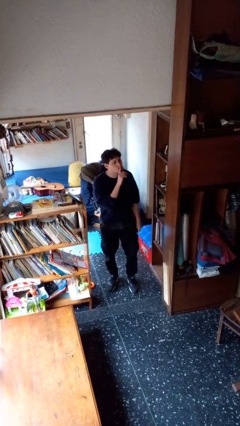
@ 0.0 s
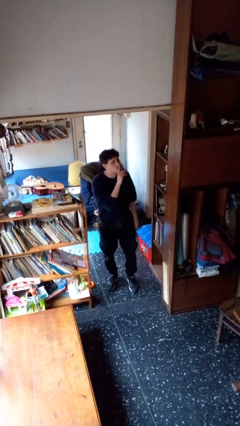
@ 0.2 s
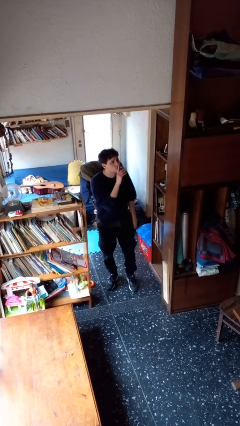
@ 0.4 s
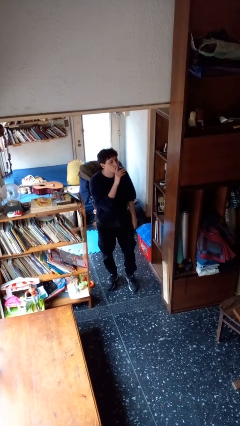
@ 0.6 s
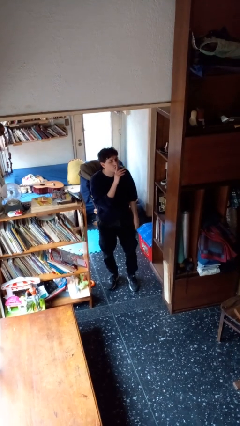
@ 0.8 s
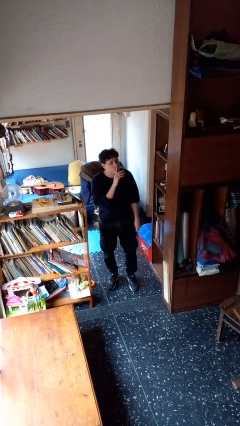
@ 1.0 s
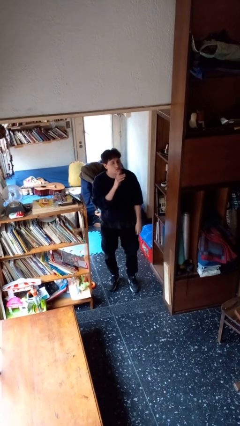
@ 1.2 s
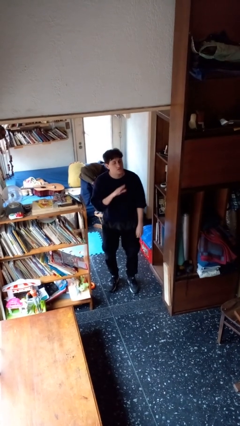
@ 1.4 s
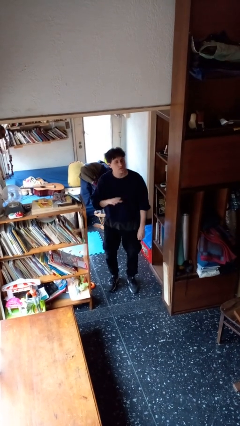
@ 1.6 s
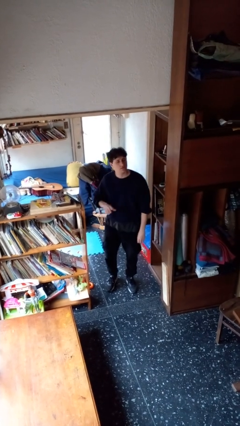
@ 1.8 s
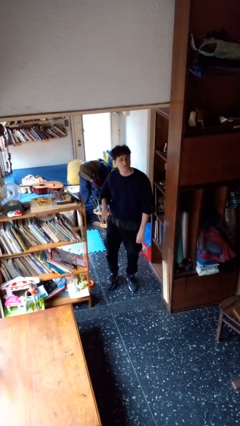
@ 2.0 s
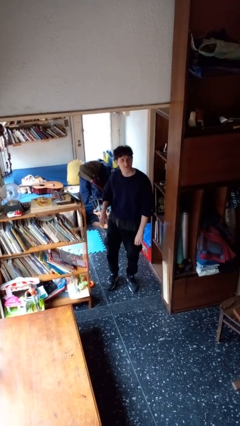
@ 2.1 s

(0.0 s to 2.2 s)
person gestures be quiet

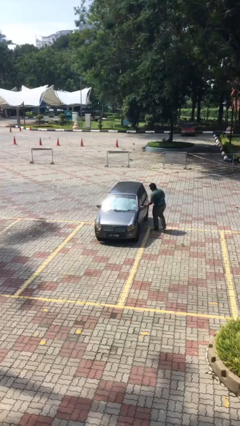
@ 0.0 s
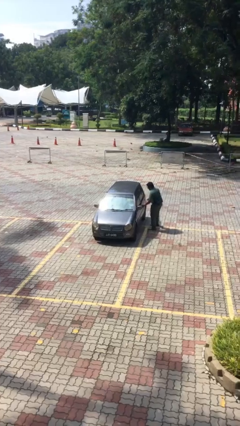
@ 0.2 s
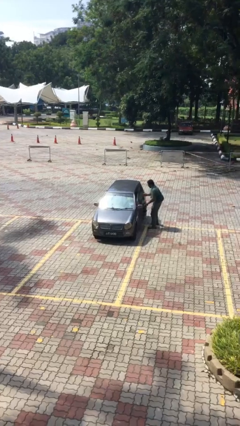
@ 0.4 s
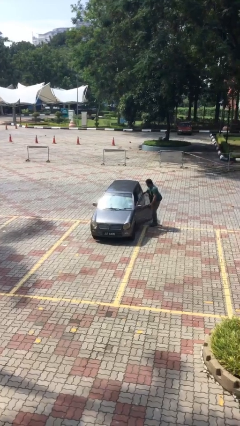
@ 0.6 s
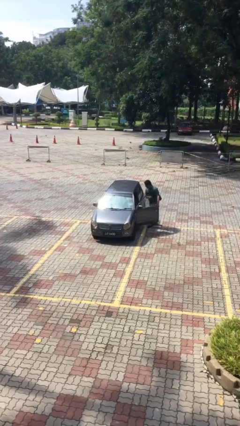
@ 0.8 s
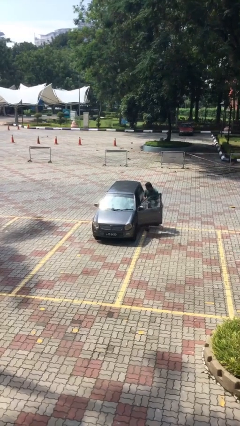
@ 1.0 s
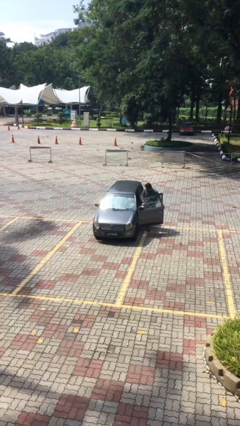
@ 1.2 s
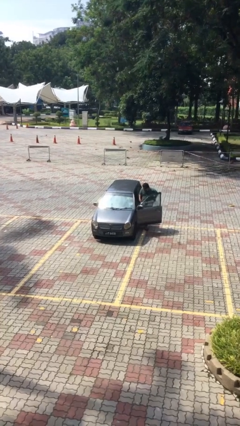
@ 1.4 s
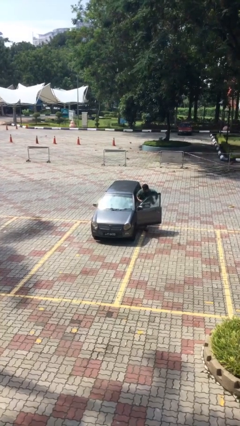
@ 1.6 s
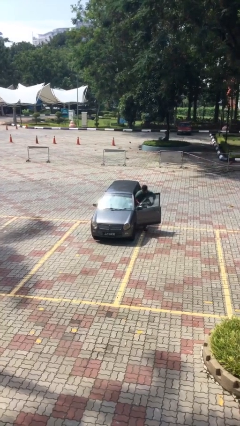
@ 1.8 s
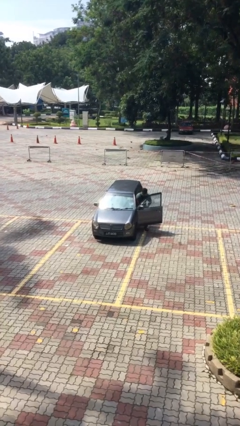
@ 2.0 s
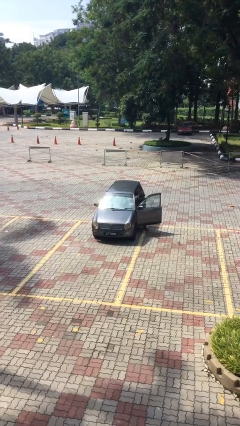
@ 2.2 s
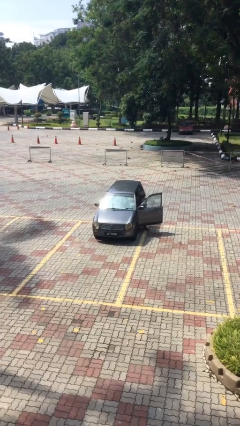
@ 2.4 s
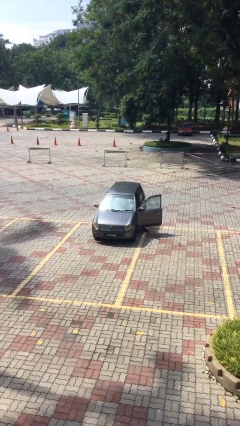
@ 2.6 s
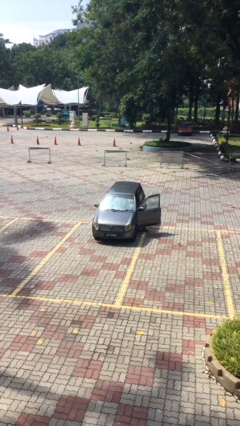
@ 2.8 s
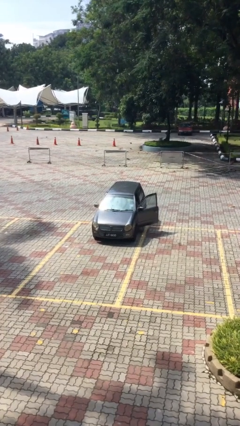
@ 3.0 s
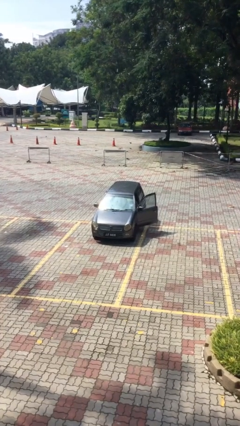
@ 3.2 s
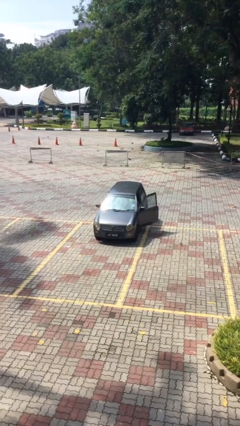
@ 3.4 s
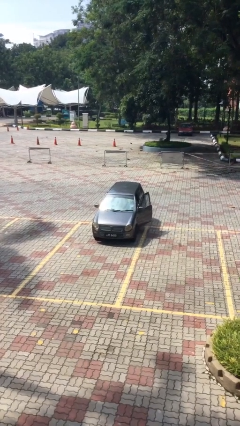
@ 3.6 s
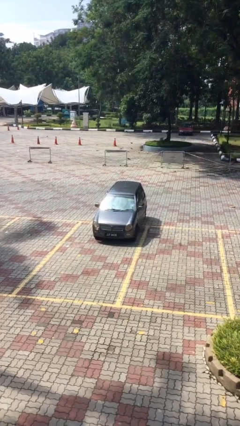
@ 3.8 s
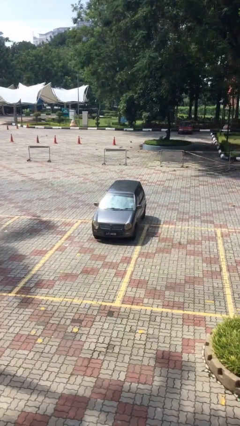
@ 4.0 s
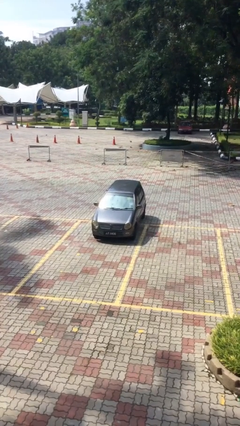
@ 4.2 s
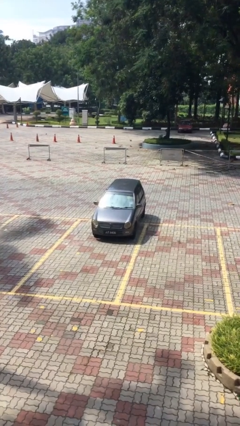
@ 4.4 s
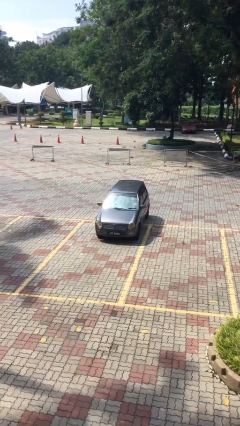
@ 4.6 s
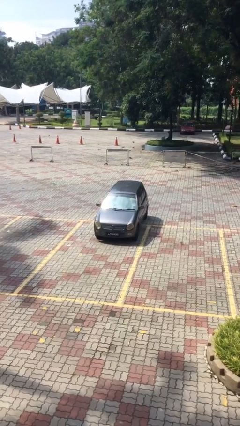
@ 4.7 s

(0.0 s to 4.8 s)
car picks up person

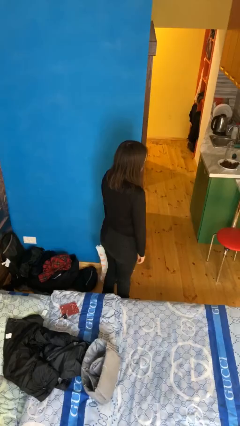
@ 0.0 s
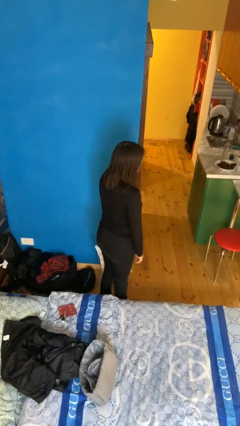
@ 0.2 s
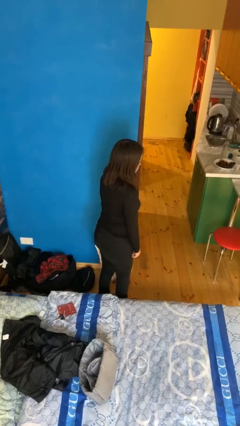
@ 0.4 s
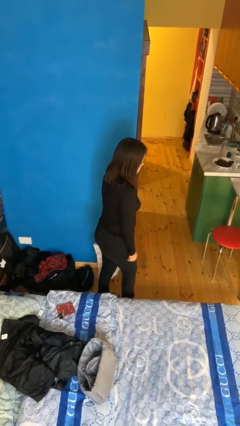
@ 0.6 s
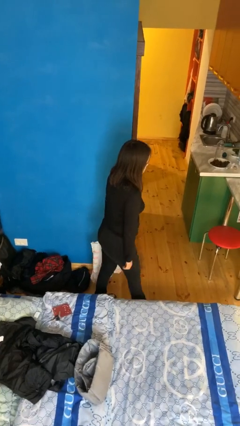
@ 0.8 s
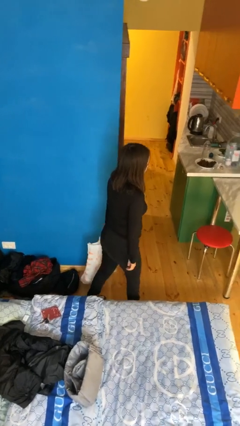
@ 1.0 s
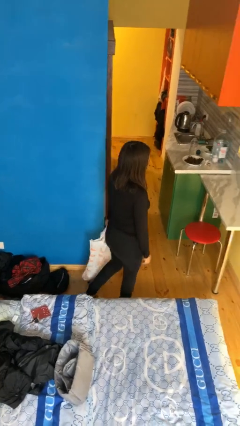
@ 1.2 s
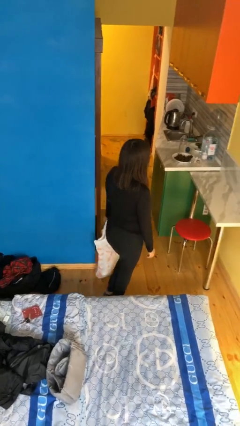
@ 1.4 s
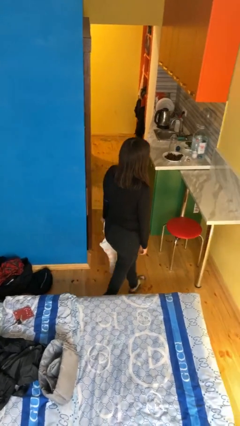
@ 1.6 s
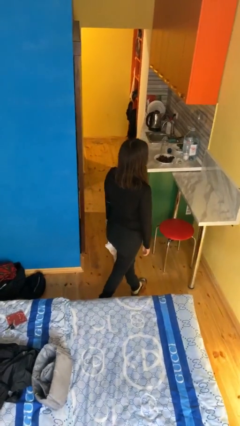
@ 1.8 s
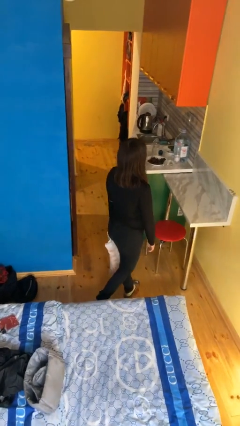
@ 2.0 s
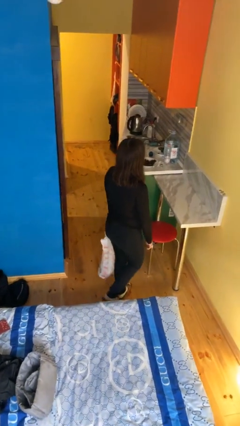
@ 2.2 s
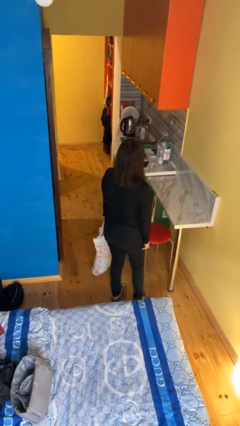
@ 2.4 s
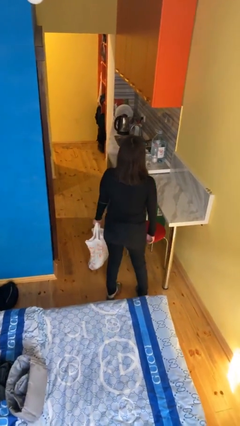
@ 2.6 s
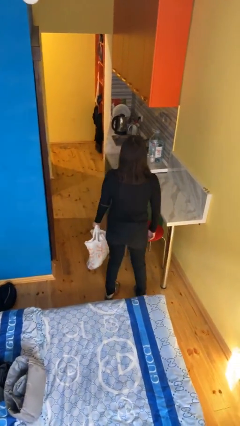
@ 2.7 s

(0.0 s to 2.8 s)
person carries groceries

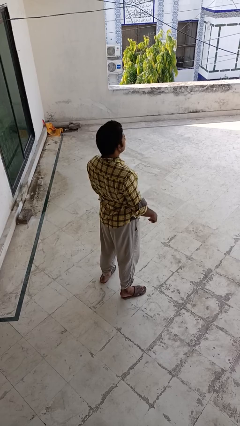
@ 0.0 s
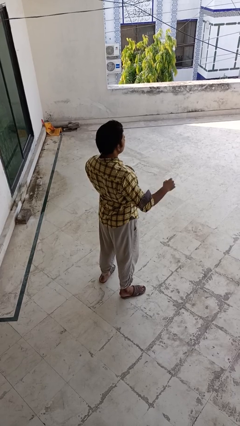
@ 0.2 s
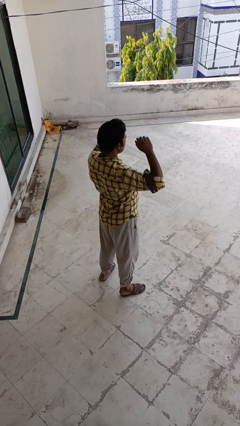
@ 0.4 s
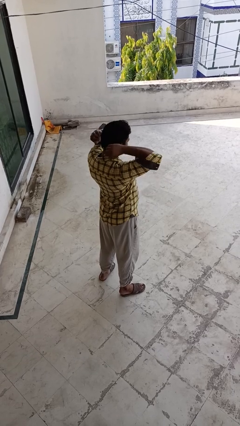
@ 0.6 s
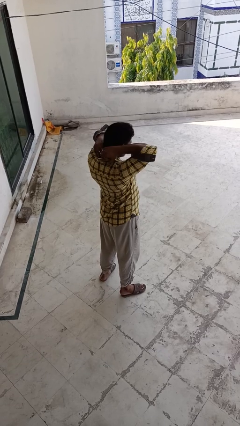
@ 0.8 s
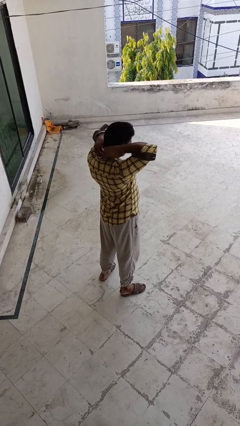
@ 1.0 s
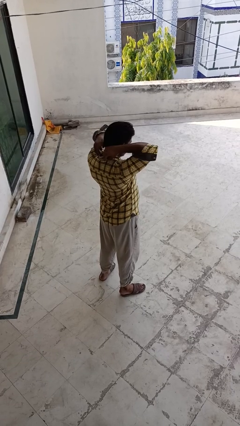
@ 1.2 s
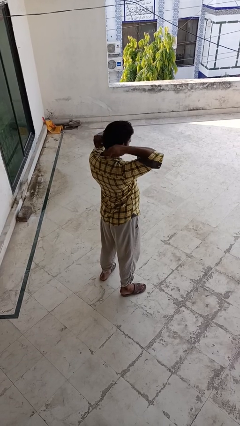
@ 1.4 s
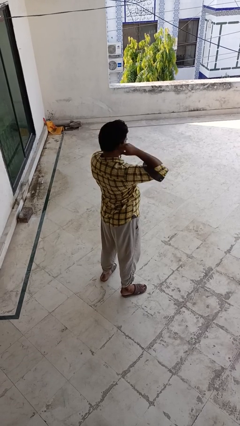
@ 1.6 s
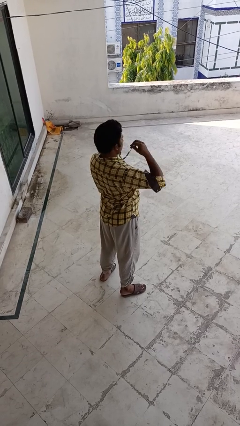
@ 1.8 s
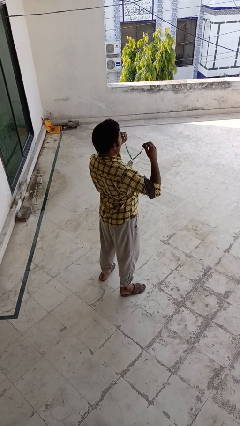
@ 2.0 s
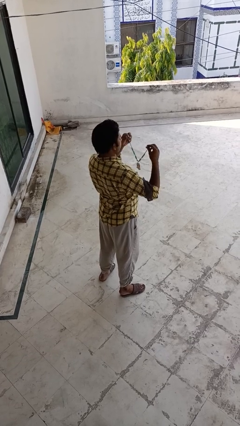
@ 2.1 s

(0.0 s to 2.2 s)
person takes off necklace

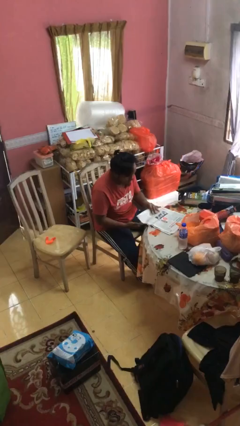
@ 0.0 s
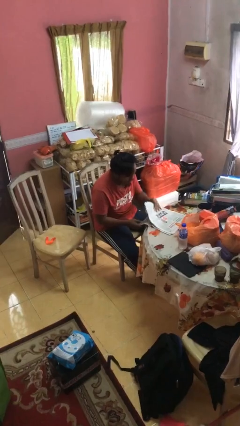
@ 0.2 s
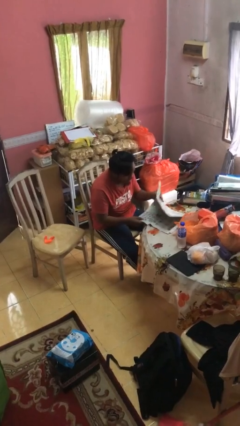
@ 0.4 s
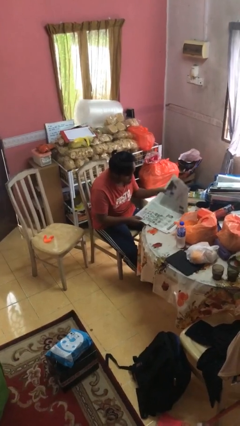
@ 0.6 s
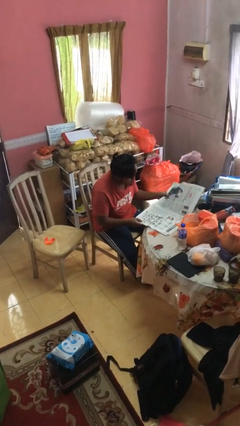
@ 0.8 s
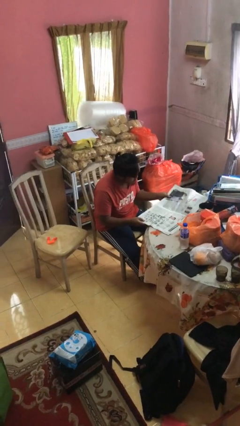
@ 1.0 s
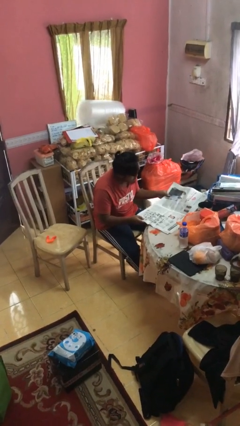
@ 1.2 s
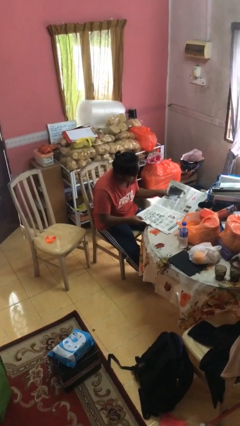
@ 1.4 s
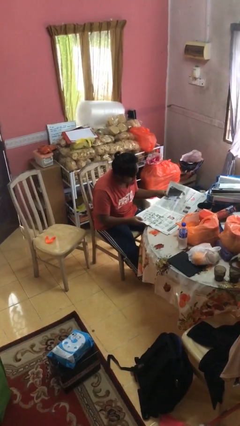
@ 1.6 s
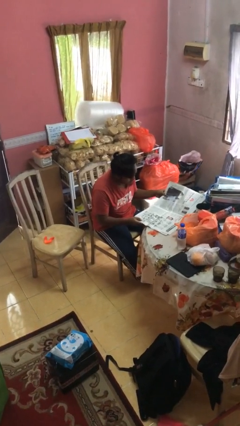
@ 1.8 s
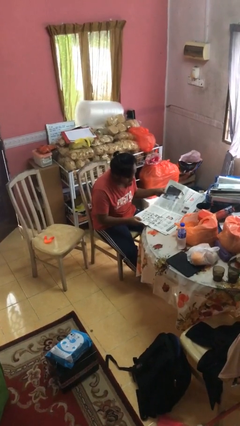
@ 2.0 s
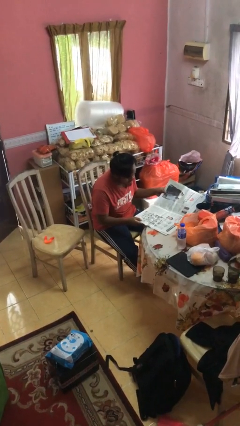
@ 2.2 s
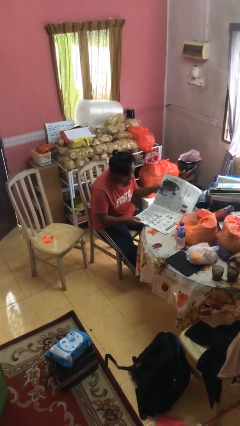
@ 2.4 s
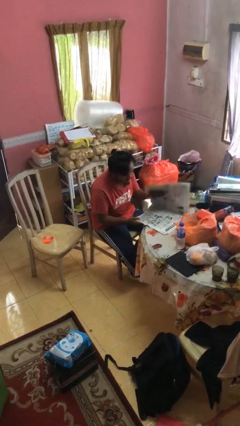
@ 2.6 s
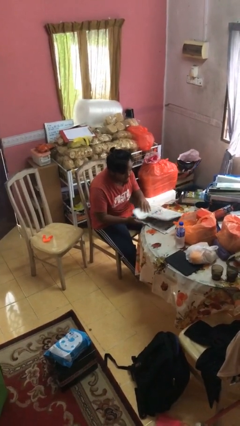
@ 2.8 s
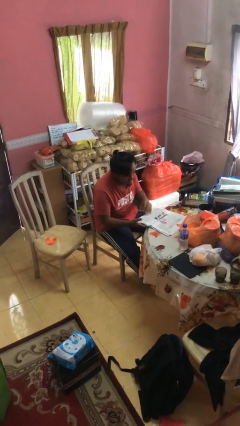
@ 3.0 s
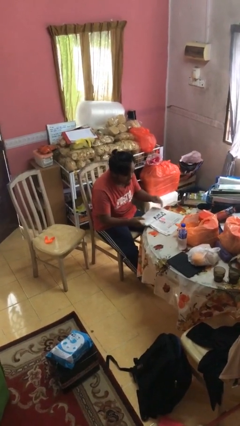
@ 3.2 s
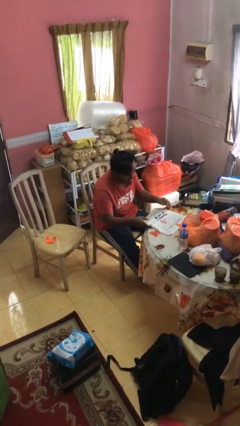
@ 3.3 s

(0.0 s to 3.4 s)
person reads newspaper

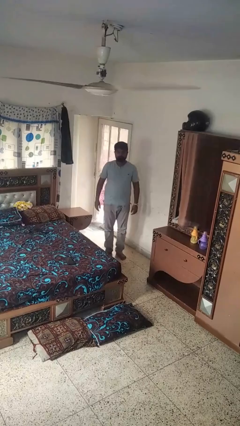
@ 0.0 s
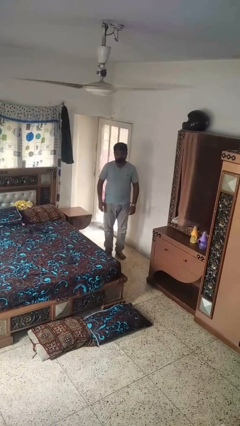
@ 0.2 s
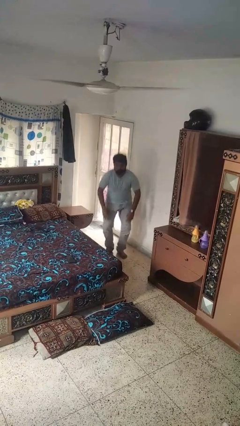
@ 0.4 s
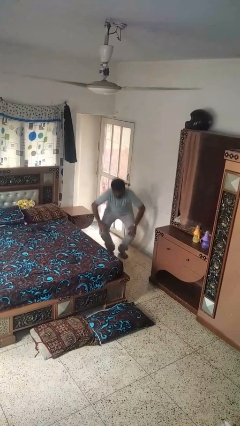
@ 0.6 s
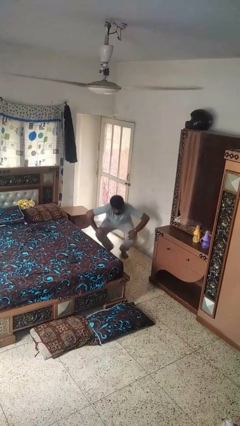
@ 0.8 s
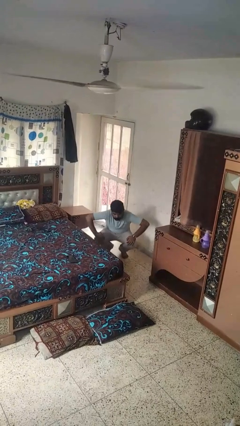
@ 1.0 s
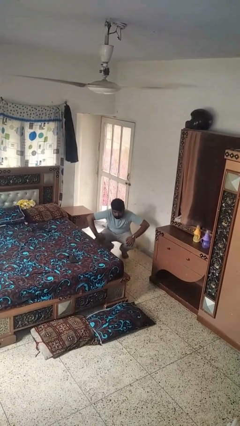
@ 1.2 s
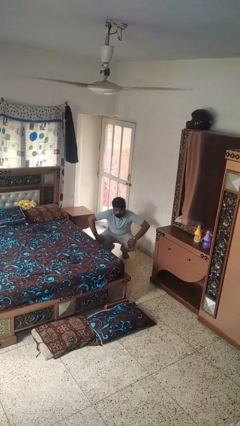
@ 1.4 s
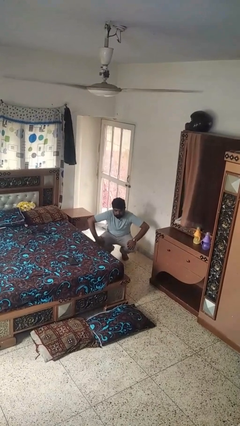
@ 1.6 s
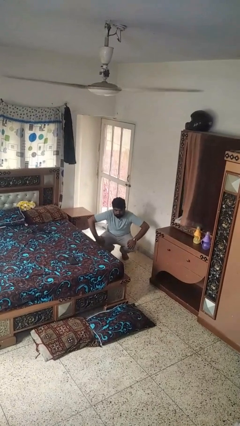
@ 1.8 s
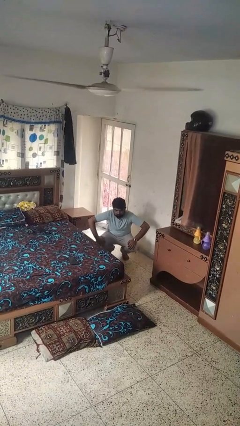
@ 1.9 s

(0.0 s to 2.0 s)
person squats

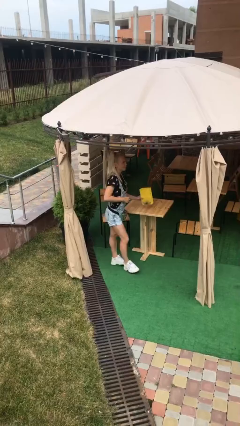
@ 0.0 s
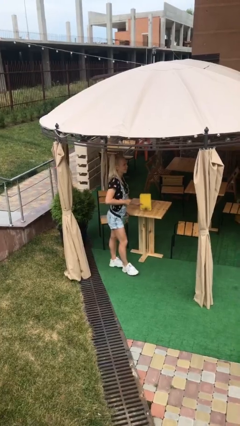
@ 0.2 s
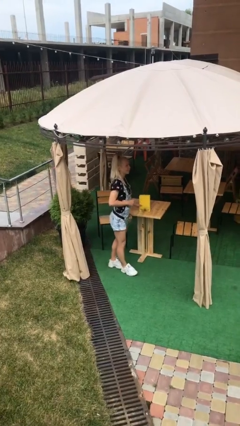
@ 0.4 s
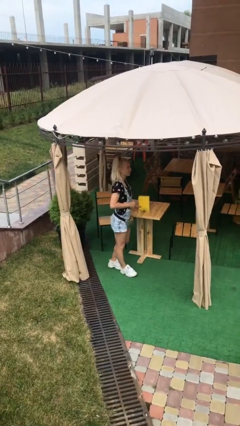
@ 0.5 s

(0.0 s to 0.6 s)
person puts down object on table
